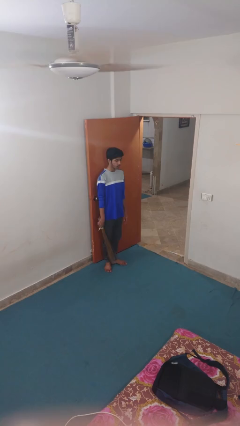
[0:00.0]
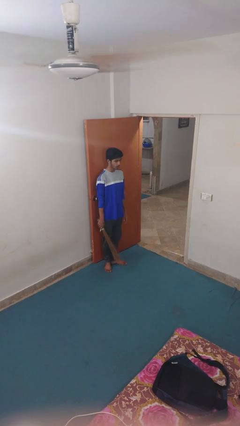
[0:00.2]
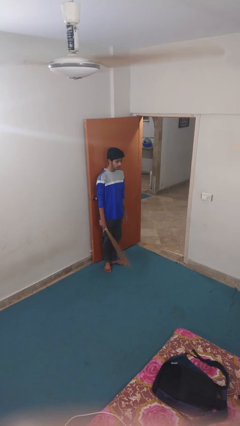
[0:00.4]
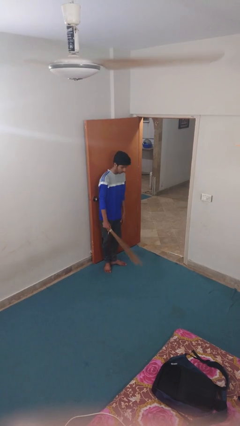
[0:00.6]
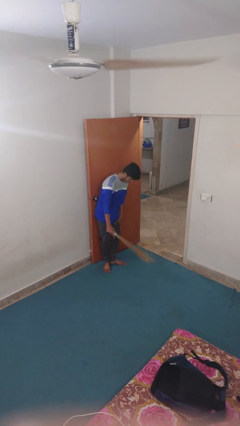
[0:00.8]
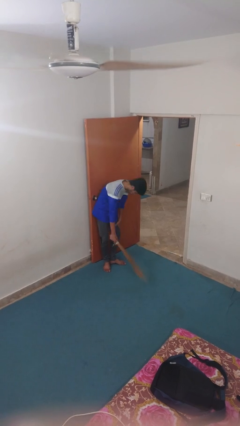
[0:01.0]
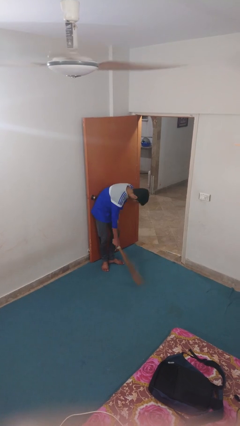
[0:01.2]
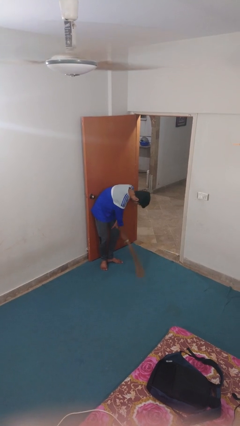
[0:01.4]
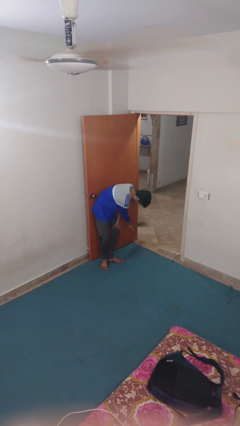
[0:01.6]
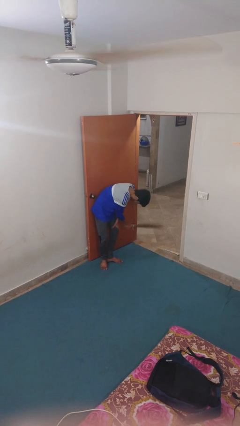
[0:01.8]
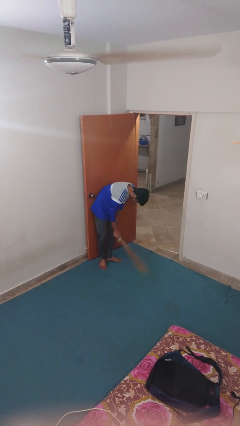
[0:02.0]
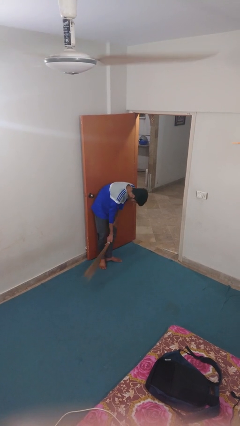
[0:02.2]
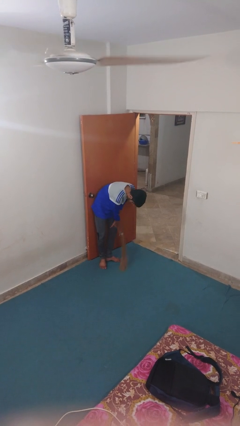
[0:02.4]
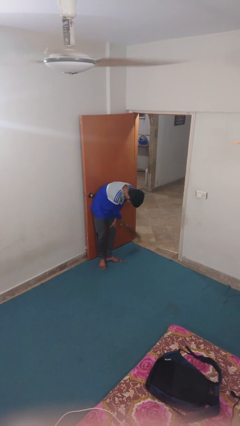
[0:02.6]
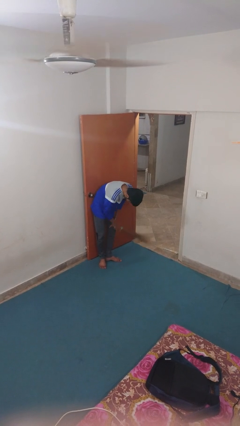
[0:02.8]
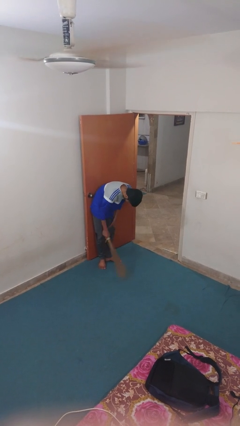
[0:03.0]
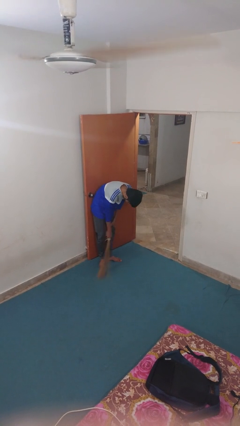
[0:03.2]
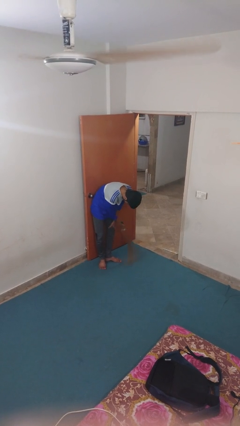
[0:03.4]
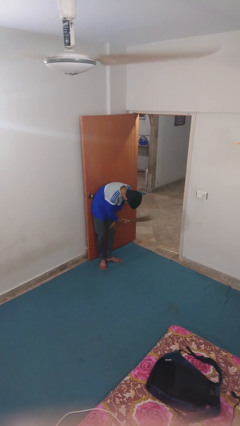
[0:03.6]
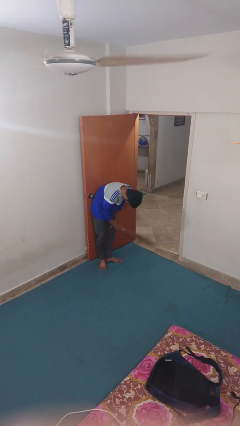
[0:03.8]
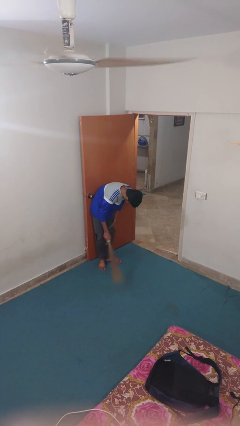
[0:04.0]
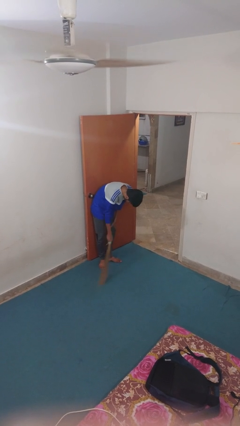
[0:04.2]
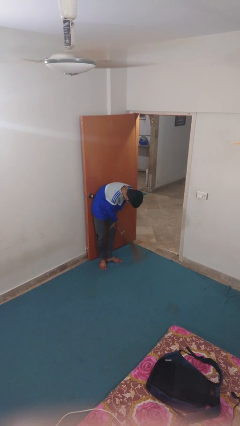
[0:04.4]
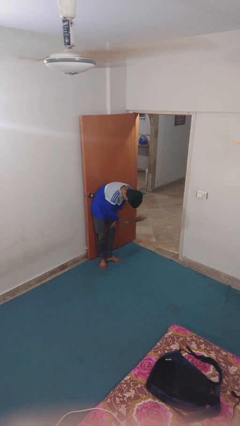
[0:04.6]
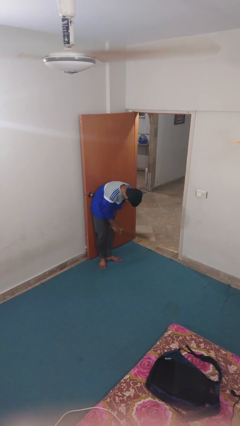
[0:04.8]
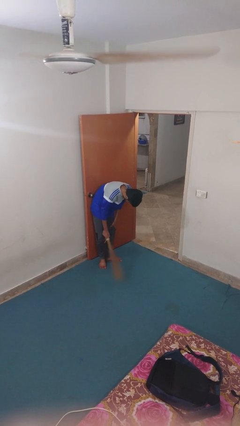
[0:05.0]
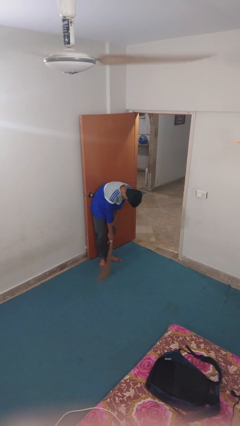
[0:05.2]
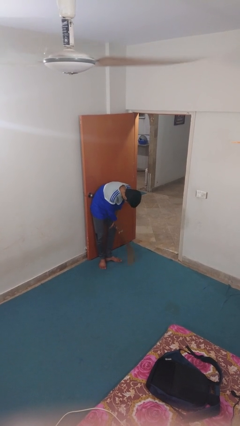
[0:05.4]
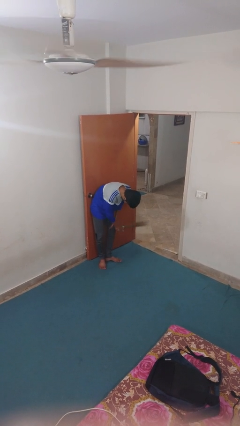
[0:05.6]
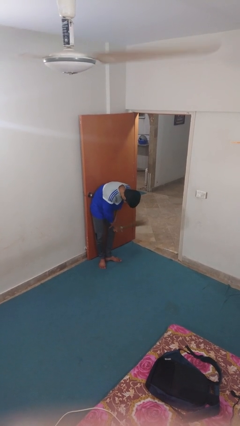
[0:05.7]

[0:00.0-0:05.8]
person sweeps floor

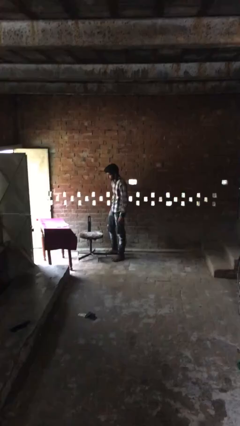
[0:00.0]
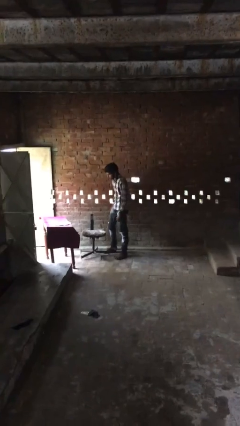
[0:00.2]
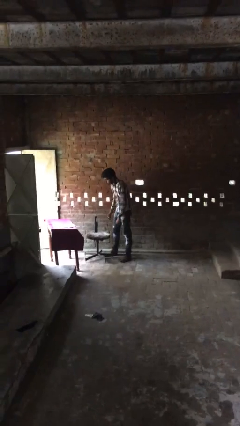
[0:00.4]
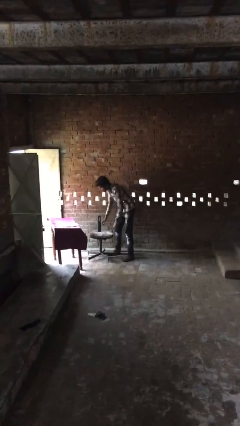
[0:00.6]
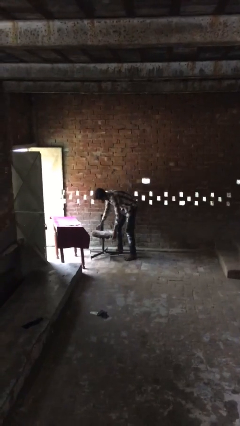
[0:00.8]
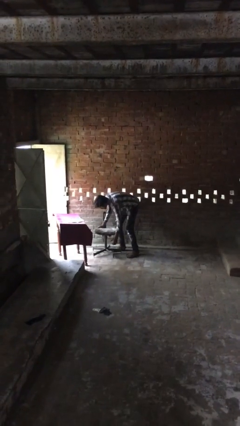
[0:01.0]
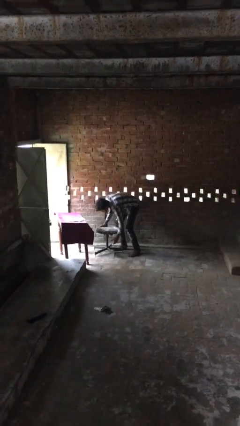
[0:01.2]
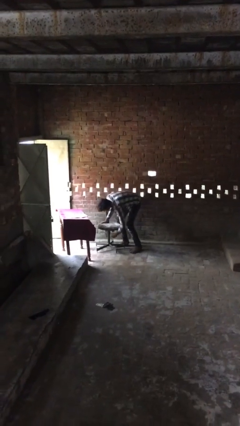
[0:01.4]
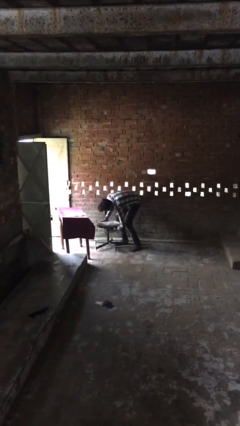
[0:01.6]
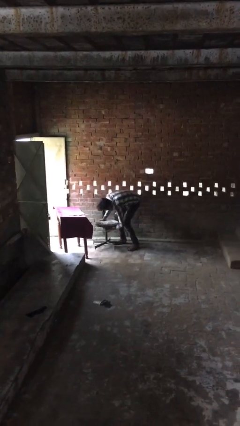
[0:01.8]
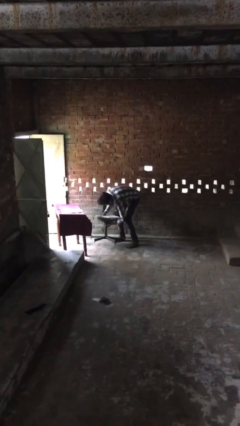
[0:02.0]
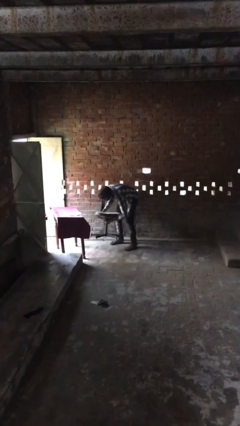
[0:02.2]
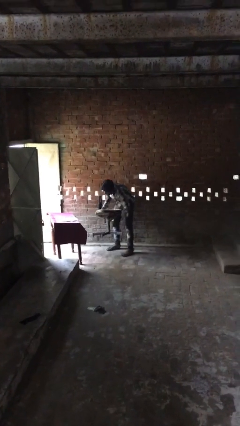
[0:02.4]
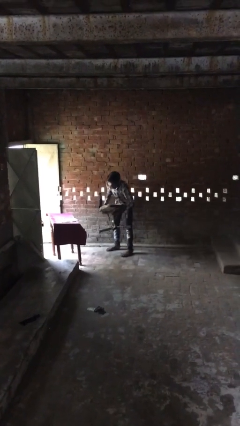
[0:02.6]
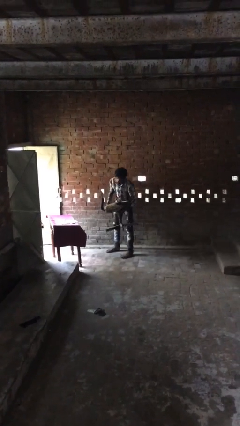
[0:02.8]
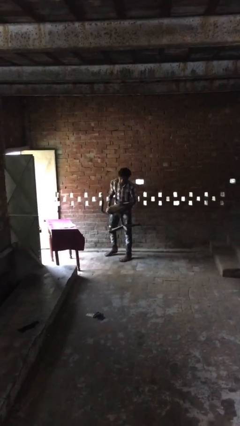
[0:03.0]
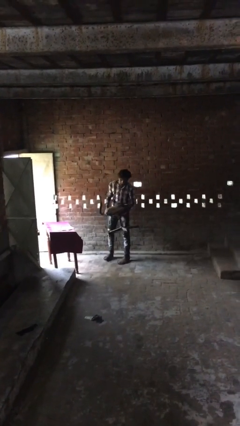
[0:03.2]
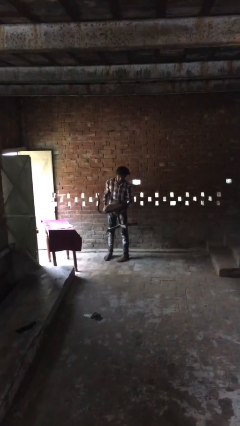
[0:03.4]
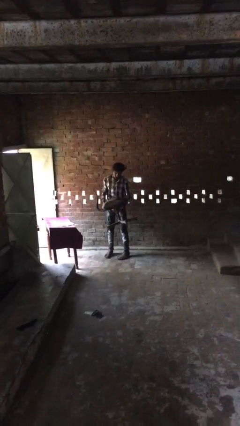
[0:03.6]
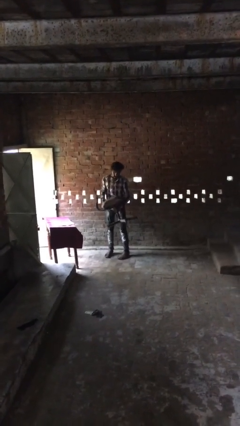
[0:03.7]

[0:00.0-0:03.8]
person picks up object from floor

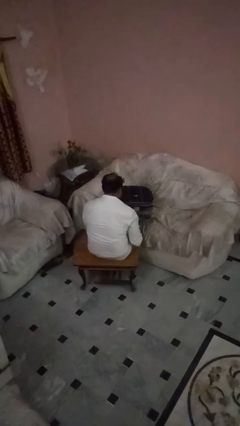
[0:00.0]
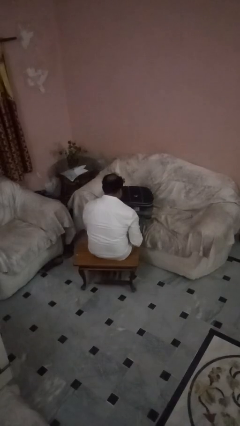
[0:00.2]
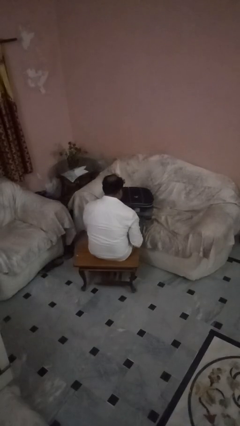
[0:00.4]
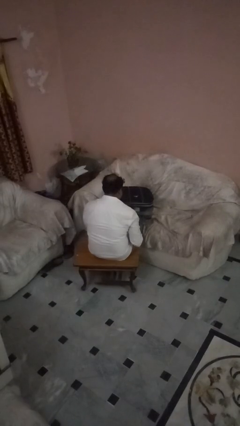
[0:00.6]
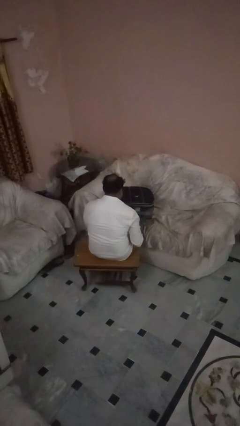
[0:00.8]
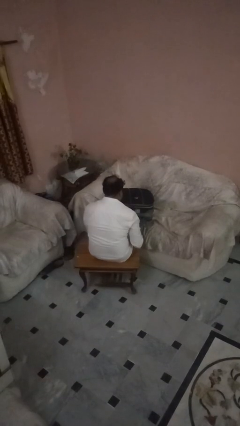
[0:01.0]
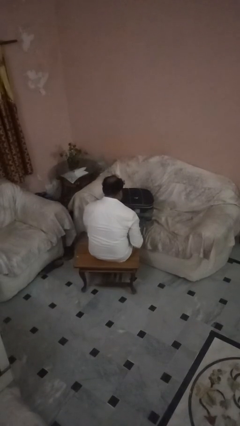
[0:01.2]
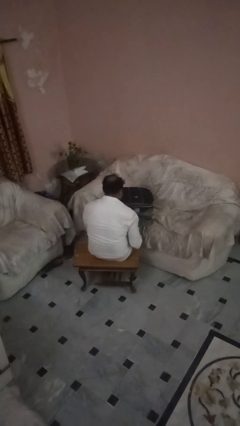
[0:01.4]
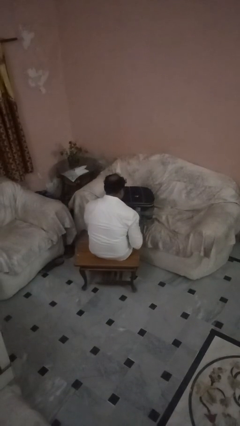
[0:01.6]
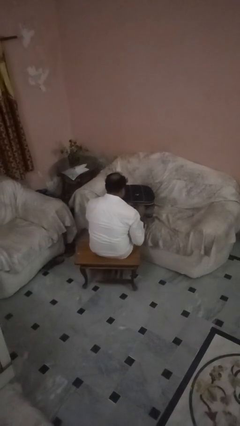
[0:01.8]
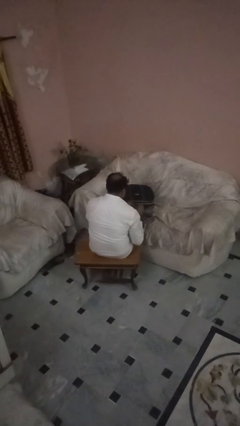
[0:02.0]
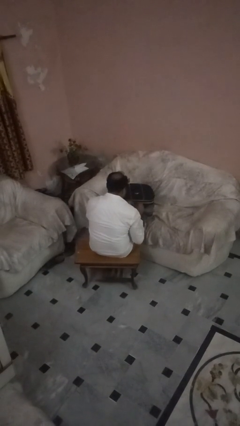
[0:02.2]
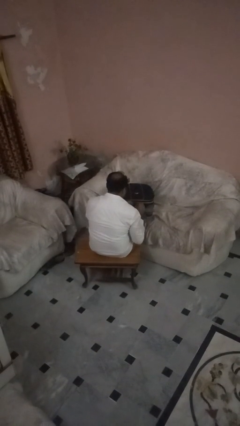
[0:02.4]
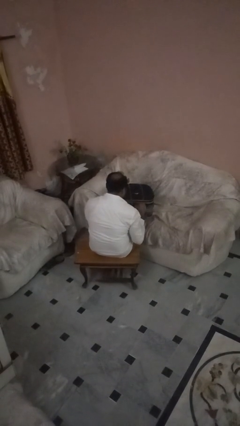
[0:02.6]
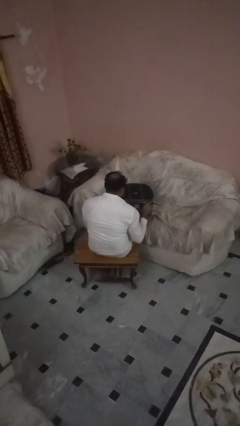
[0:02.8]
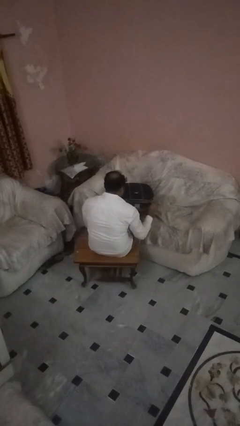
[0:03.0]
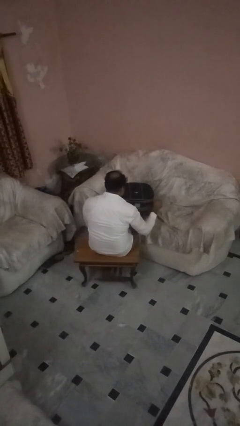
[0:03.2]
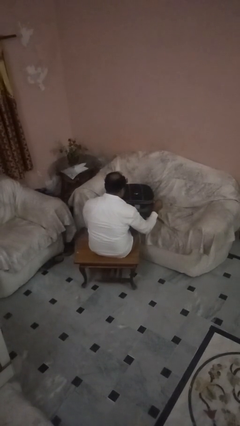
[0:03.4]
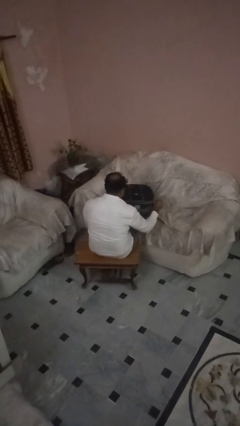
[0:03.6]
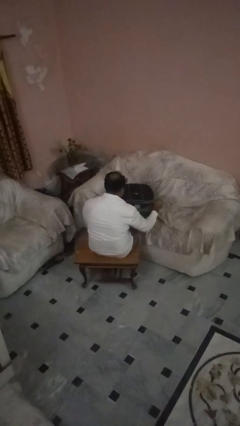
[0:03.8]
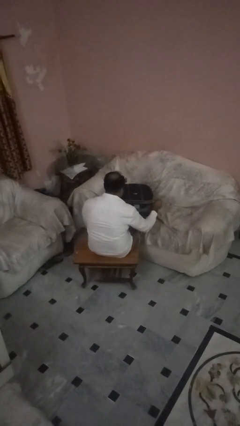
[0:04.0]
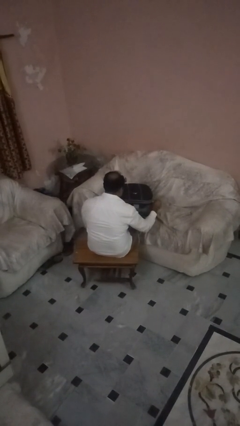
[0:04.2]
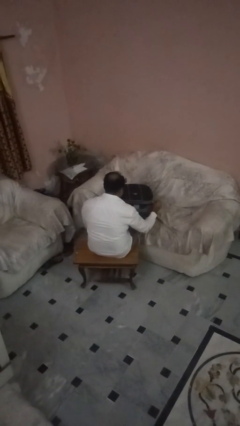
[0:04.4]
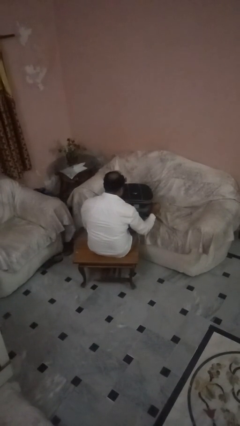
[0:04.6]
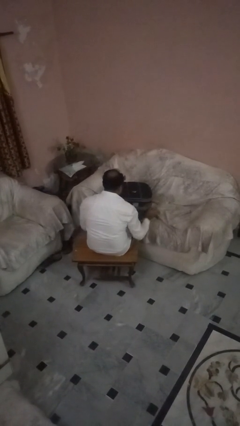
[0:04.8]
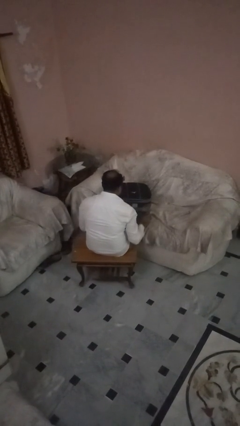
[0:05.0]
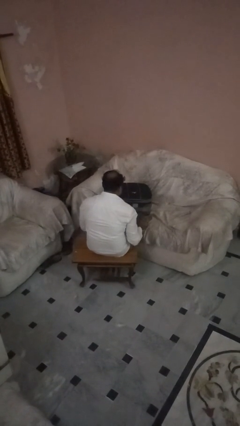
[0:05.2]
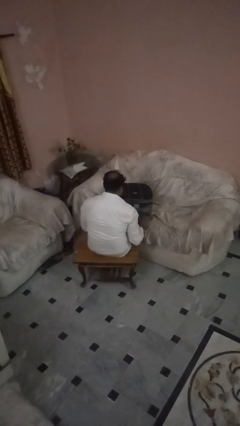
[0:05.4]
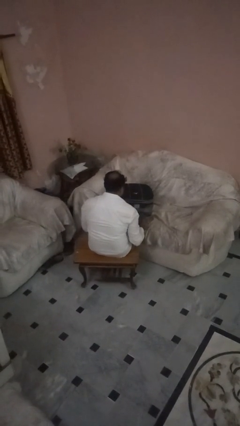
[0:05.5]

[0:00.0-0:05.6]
person opens suitcase

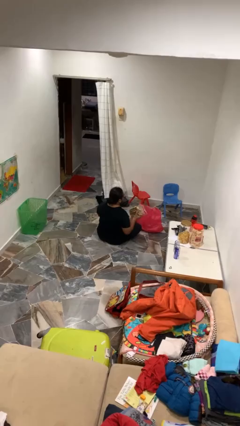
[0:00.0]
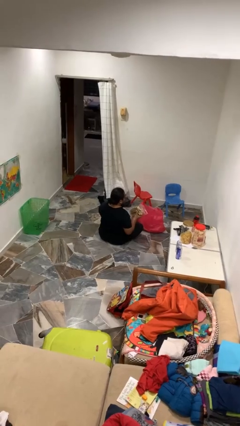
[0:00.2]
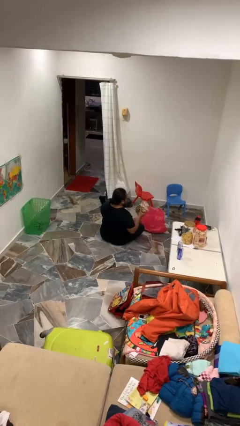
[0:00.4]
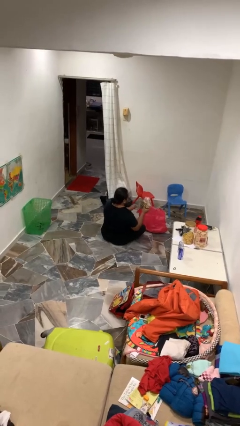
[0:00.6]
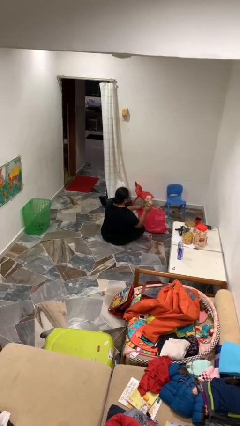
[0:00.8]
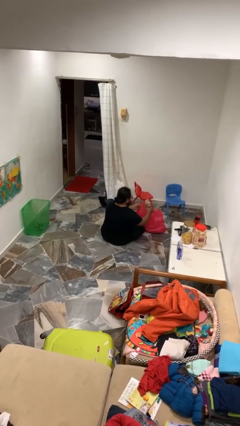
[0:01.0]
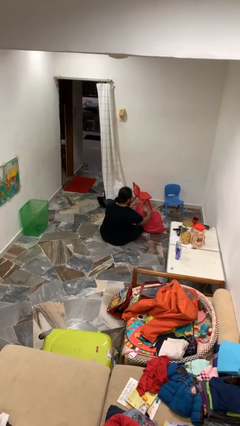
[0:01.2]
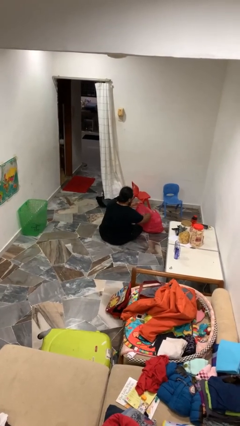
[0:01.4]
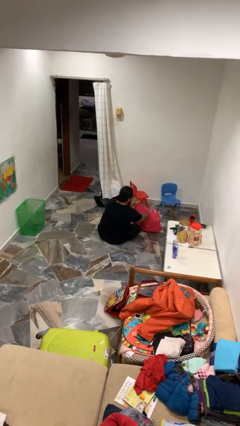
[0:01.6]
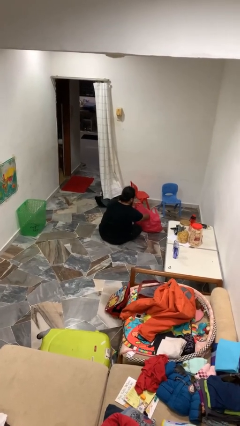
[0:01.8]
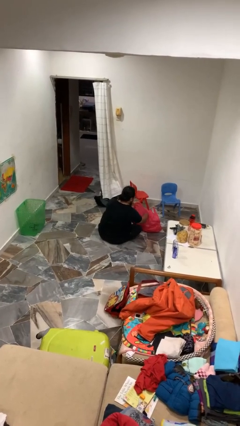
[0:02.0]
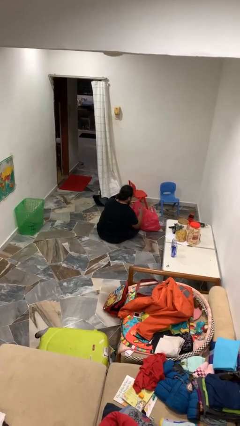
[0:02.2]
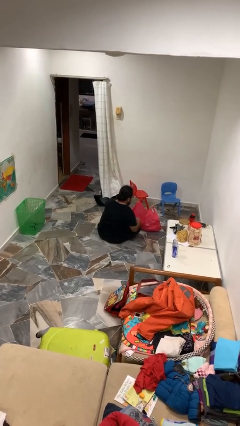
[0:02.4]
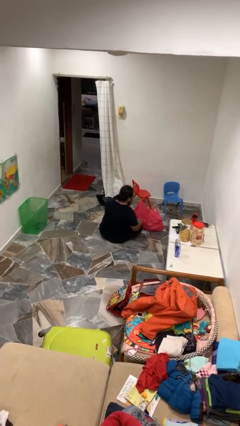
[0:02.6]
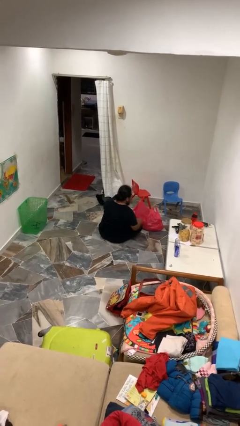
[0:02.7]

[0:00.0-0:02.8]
person puts object into bag
